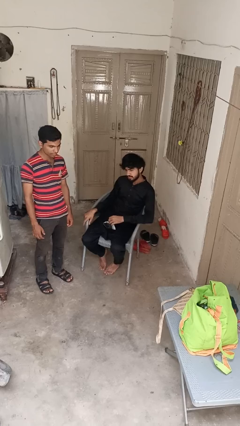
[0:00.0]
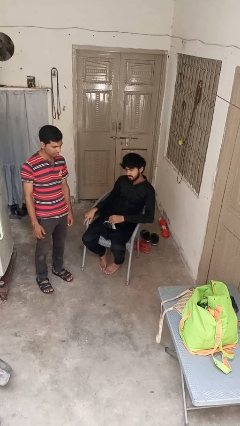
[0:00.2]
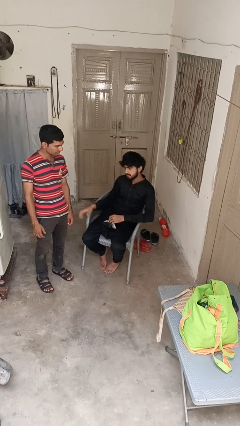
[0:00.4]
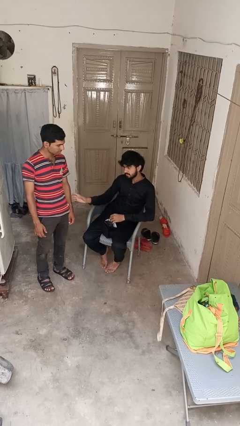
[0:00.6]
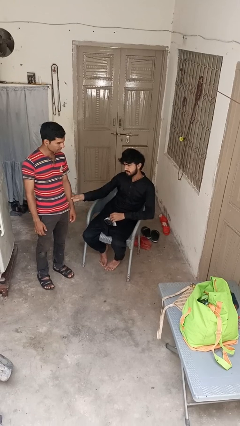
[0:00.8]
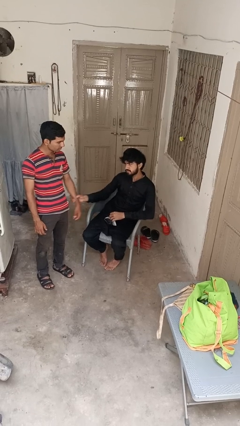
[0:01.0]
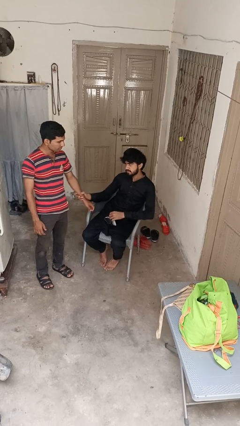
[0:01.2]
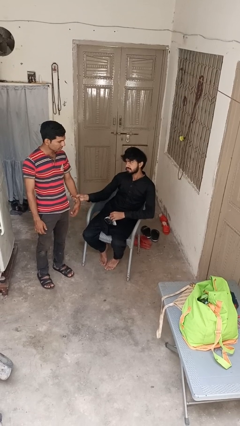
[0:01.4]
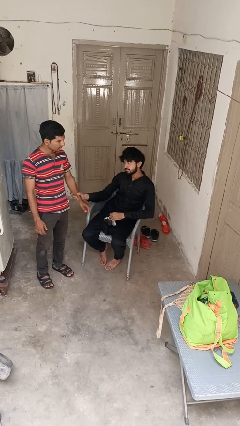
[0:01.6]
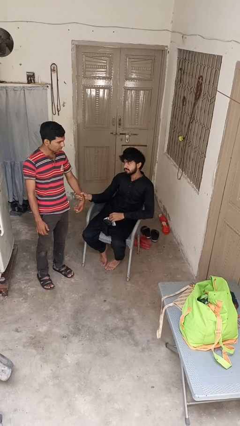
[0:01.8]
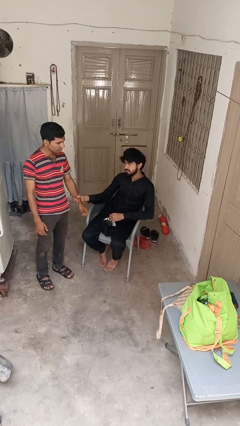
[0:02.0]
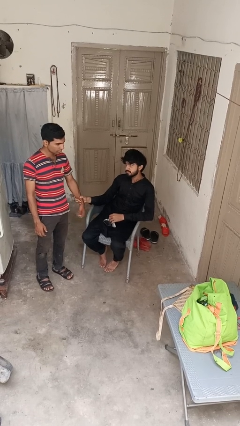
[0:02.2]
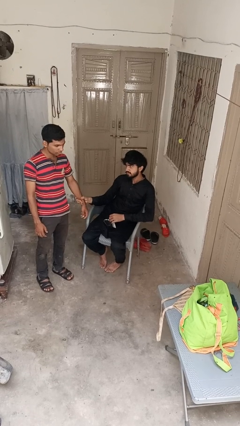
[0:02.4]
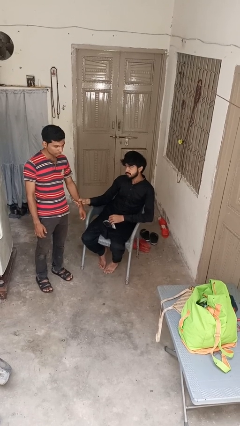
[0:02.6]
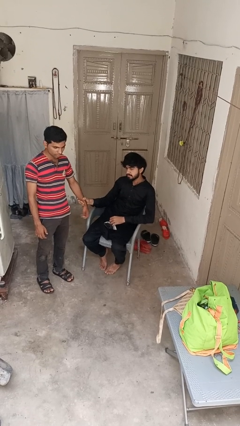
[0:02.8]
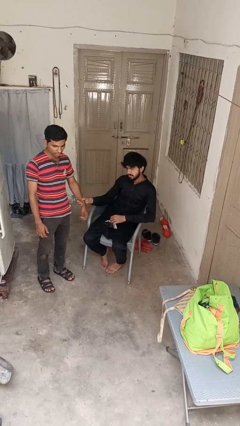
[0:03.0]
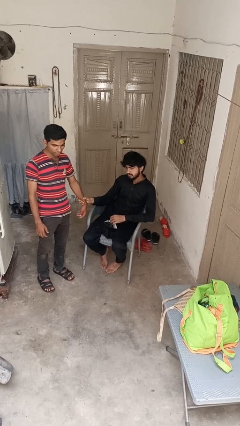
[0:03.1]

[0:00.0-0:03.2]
person grabs person by forearm

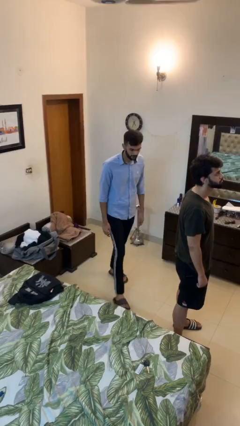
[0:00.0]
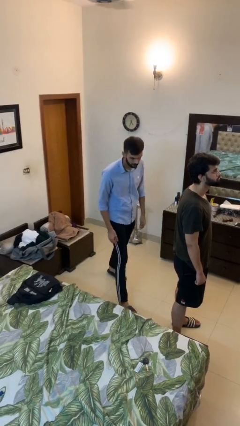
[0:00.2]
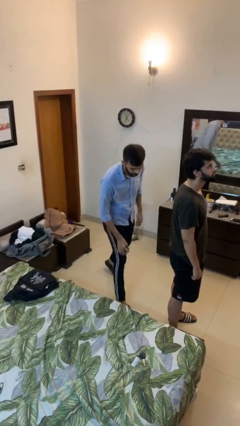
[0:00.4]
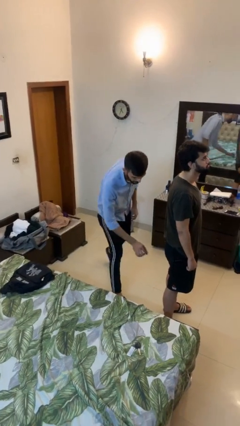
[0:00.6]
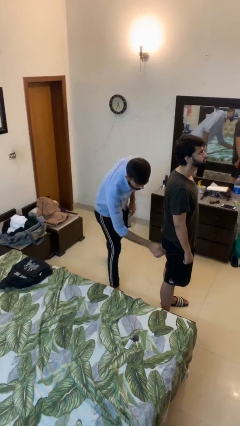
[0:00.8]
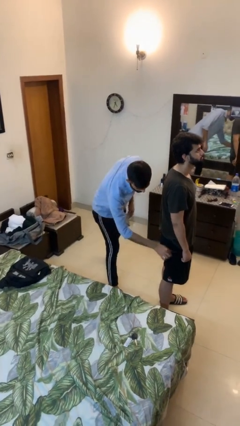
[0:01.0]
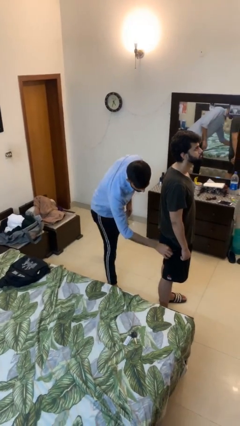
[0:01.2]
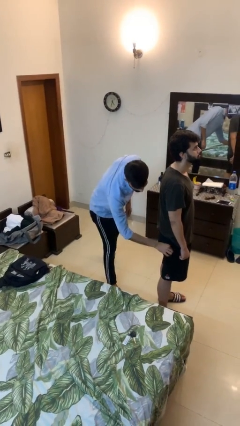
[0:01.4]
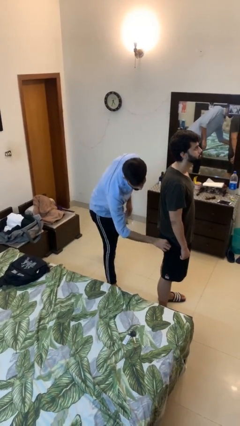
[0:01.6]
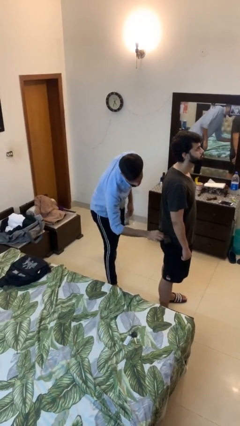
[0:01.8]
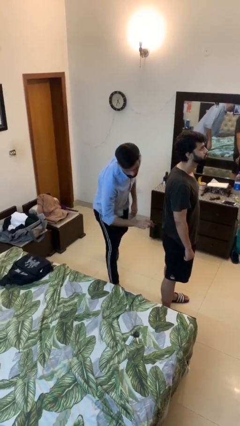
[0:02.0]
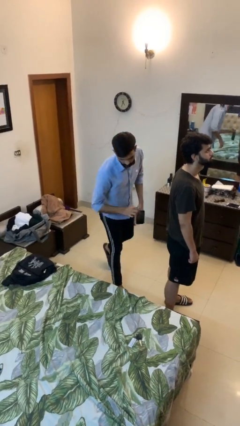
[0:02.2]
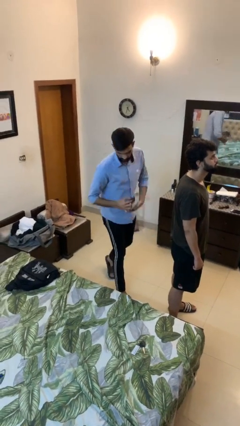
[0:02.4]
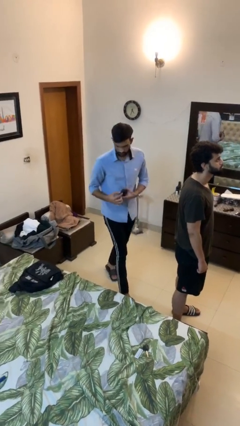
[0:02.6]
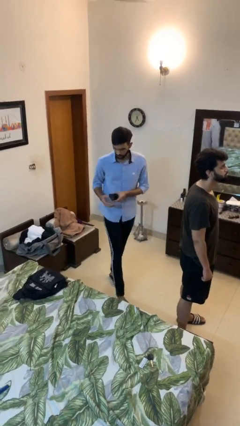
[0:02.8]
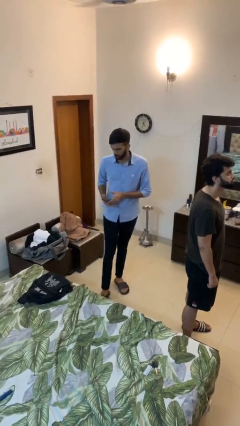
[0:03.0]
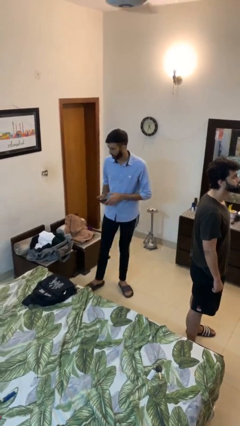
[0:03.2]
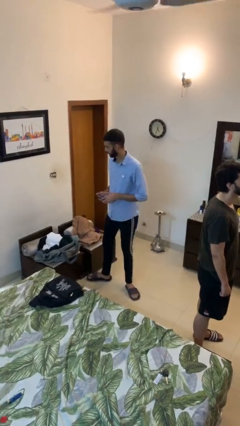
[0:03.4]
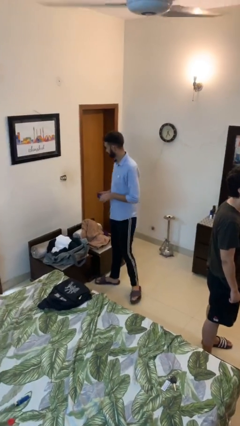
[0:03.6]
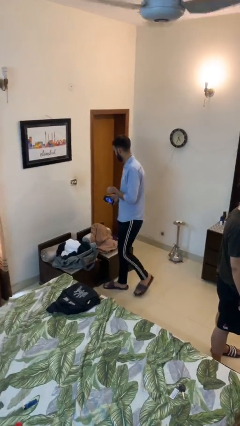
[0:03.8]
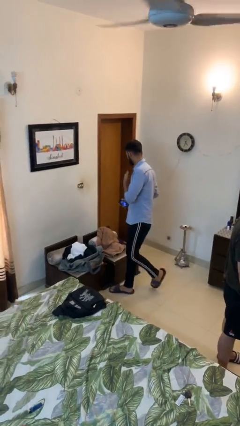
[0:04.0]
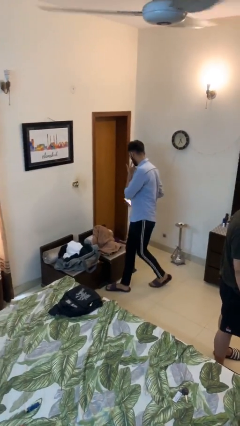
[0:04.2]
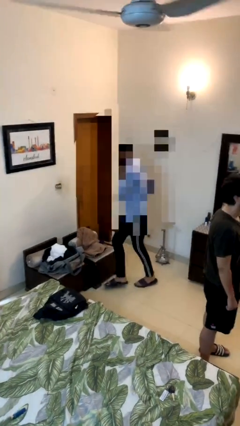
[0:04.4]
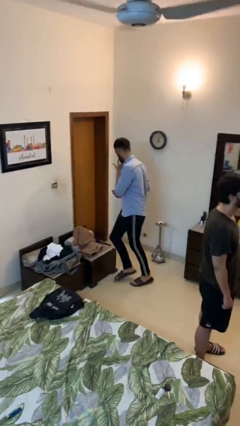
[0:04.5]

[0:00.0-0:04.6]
person steals object from person

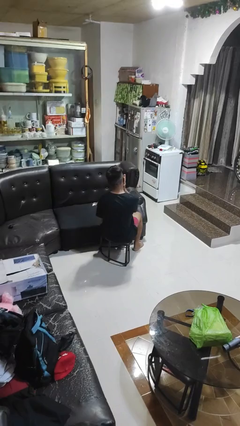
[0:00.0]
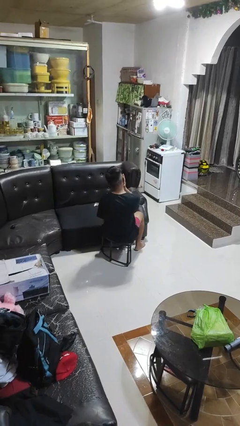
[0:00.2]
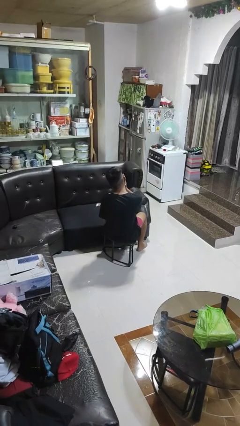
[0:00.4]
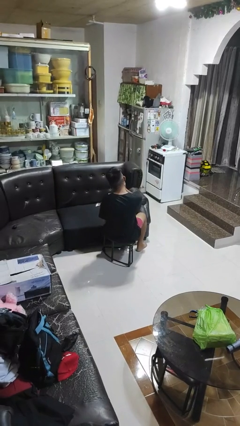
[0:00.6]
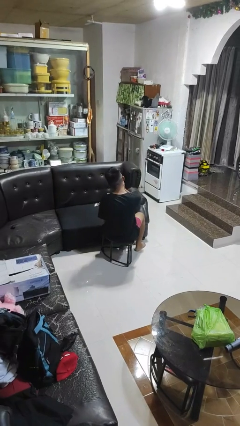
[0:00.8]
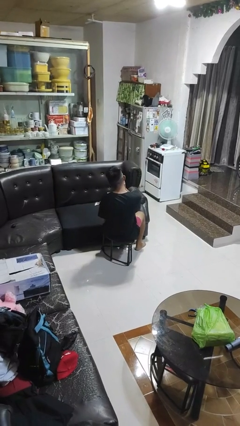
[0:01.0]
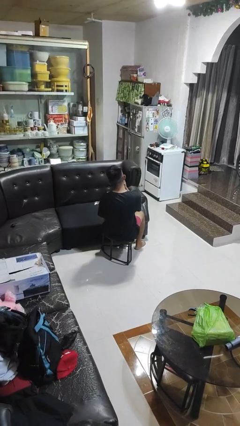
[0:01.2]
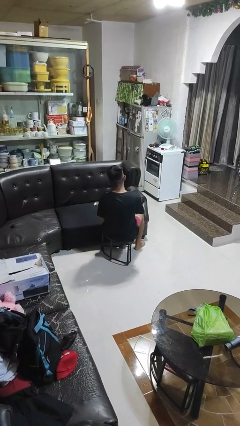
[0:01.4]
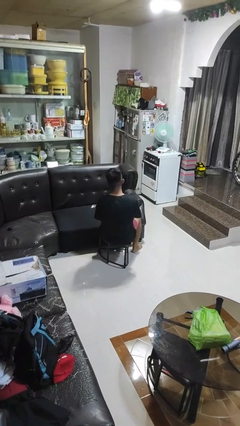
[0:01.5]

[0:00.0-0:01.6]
person swats bug

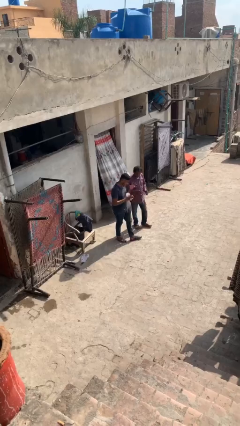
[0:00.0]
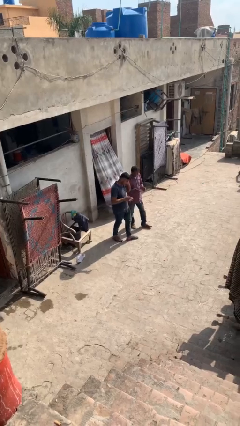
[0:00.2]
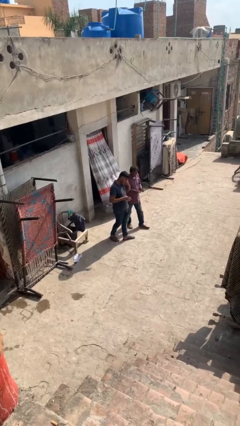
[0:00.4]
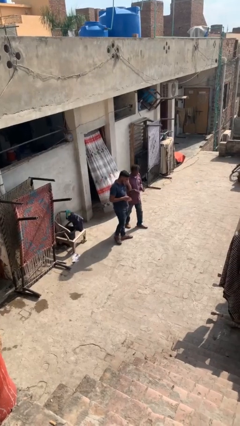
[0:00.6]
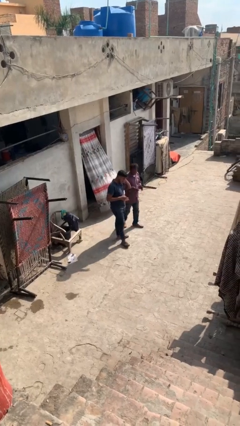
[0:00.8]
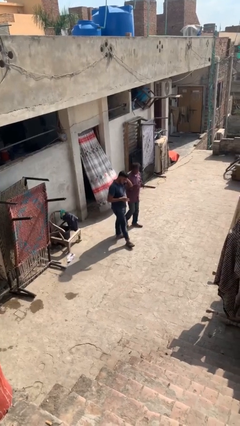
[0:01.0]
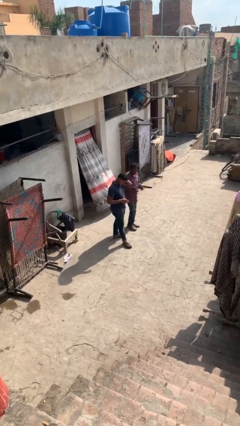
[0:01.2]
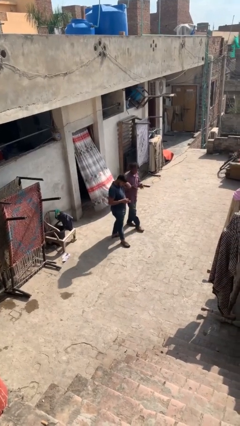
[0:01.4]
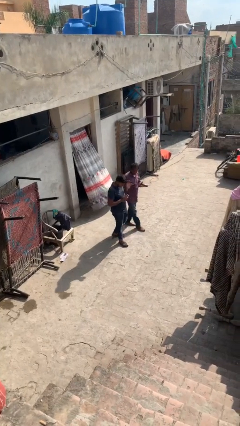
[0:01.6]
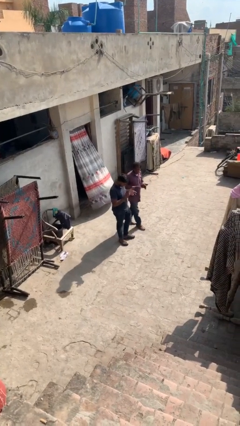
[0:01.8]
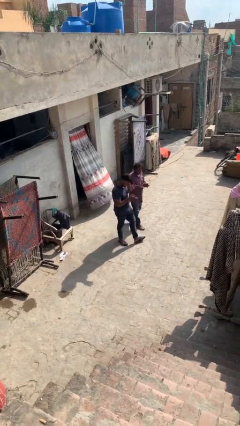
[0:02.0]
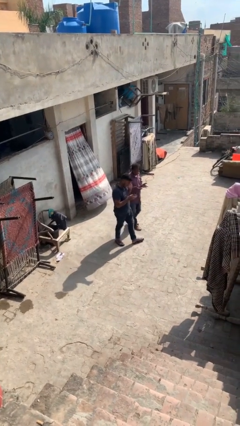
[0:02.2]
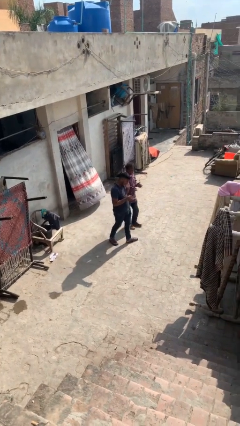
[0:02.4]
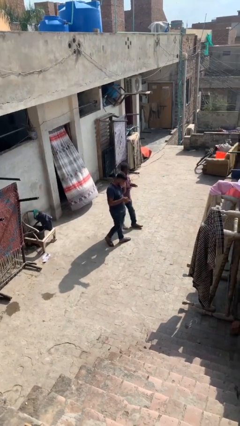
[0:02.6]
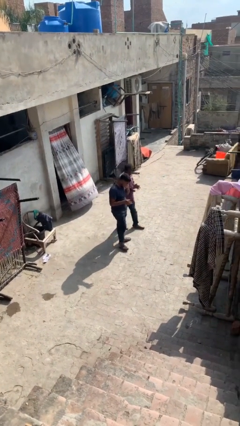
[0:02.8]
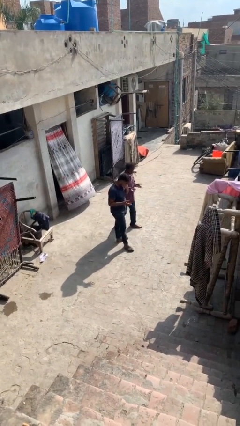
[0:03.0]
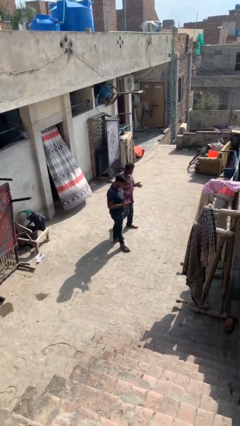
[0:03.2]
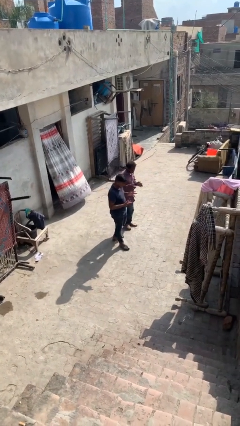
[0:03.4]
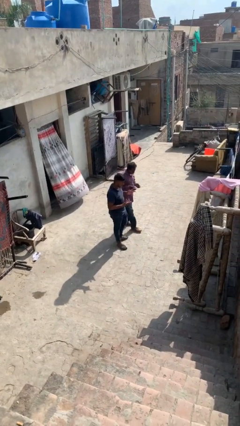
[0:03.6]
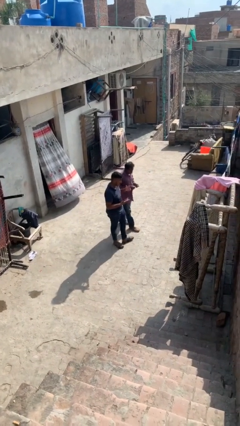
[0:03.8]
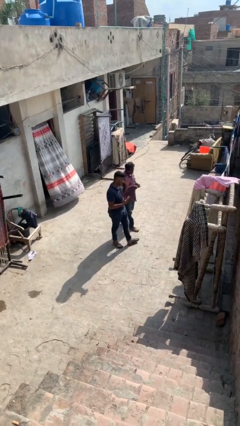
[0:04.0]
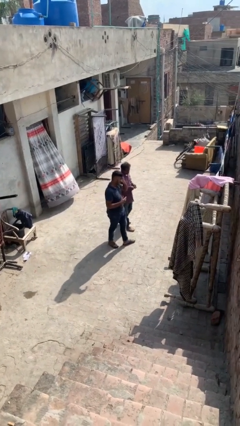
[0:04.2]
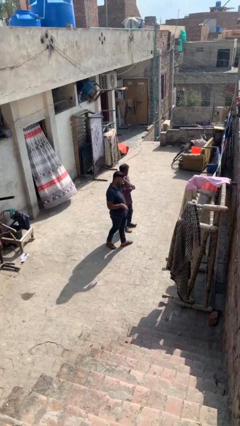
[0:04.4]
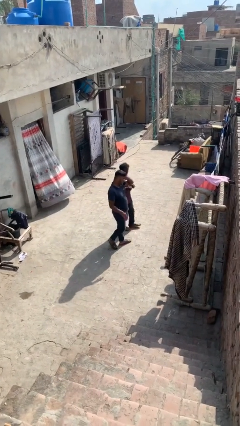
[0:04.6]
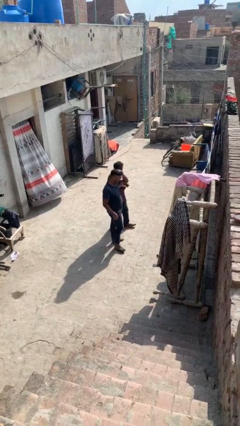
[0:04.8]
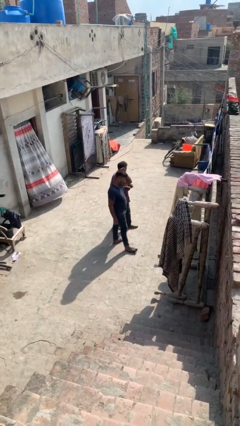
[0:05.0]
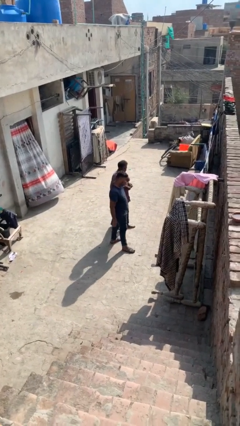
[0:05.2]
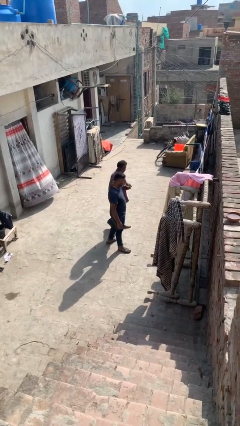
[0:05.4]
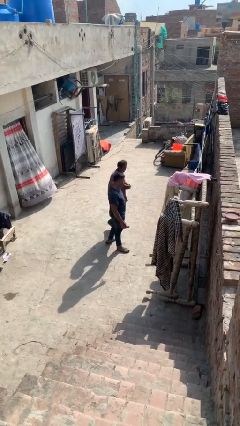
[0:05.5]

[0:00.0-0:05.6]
person talks to person

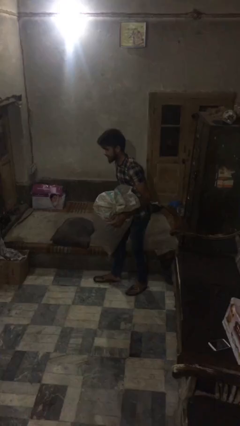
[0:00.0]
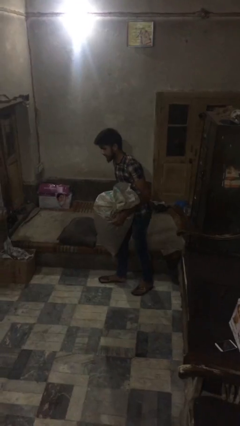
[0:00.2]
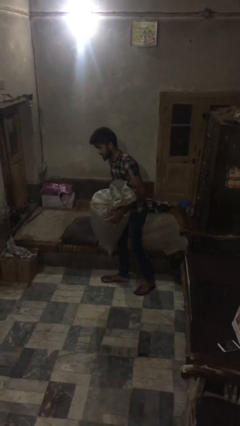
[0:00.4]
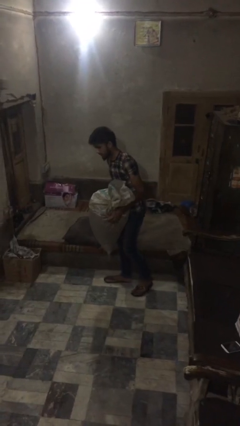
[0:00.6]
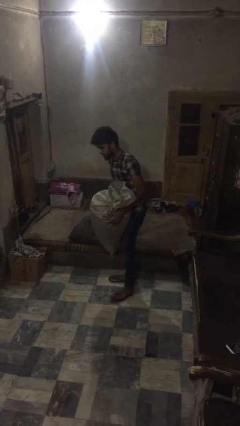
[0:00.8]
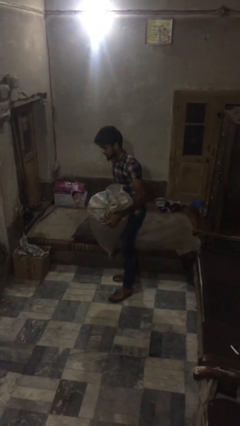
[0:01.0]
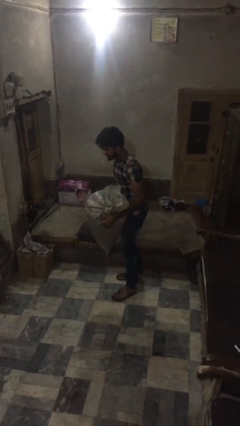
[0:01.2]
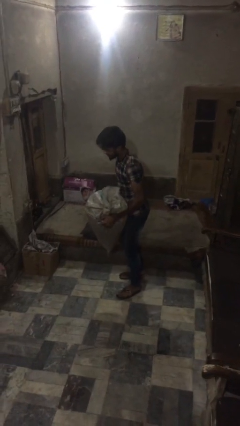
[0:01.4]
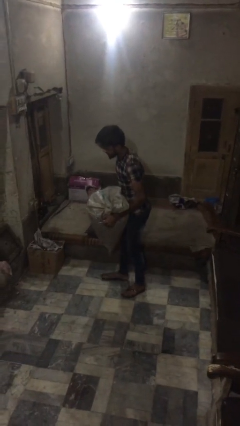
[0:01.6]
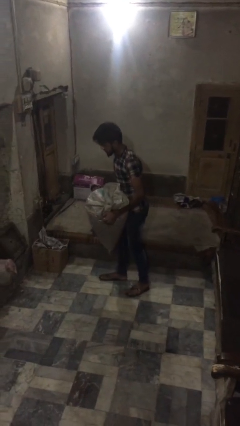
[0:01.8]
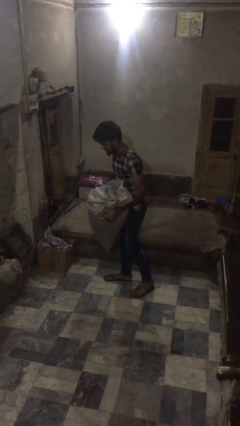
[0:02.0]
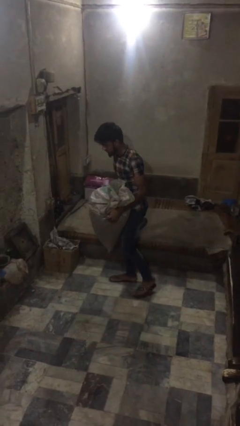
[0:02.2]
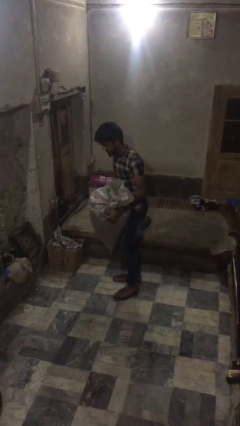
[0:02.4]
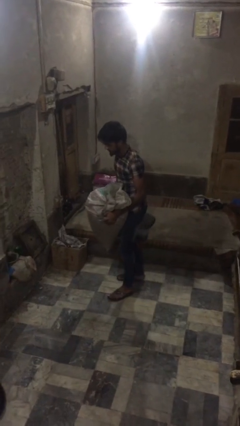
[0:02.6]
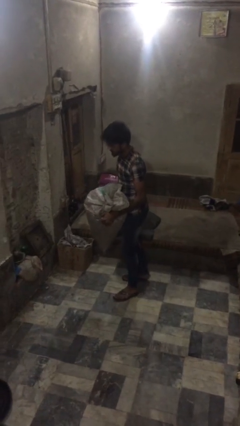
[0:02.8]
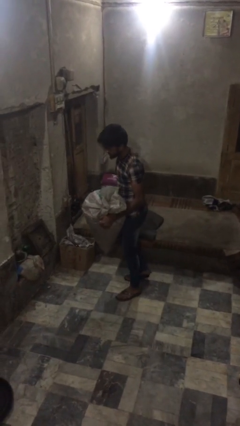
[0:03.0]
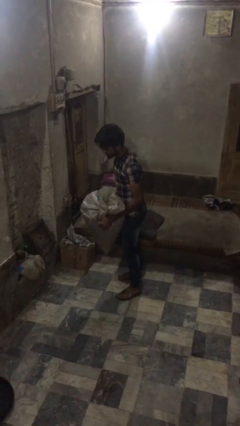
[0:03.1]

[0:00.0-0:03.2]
person carries heavy object
